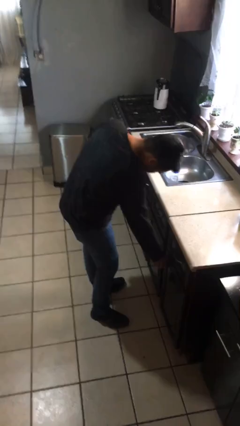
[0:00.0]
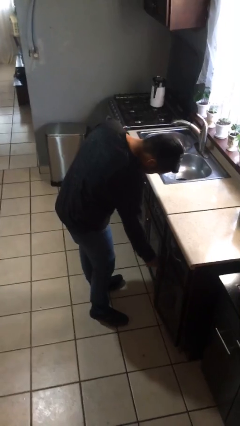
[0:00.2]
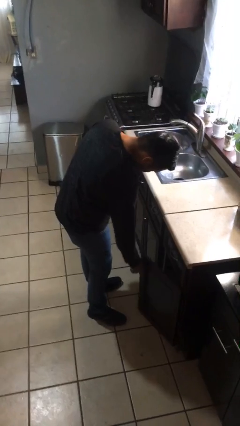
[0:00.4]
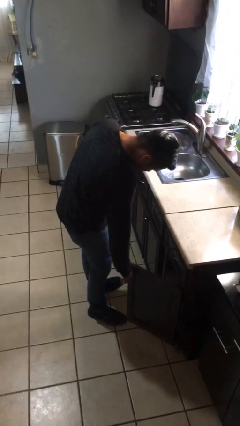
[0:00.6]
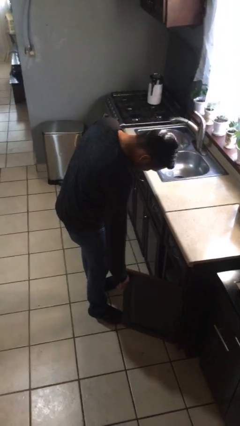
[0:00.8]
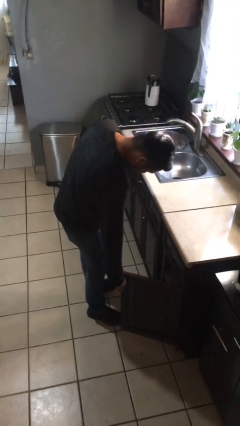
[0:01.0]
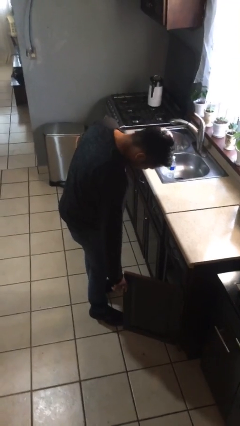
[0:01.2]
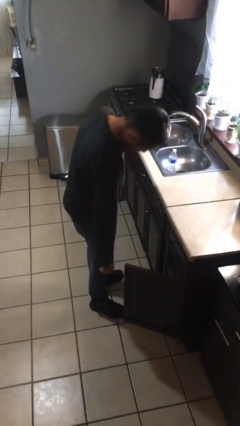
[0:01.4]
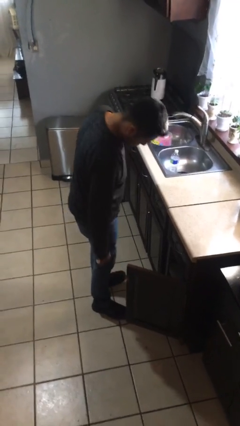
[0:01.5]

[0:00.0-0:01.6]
person opens cabinet

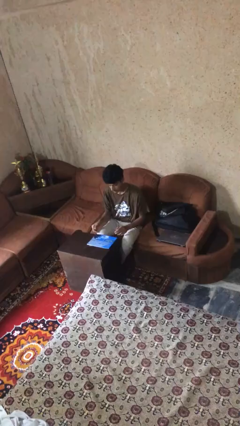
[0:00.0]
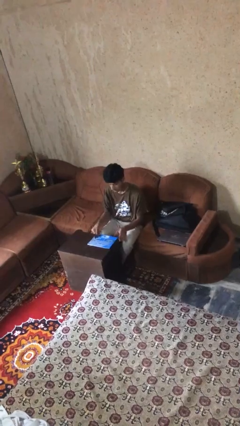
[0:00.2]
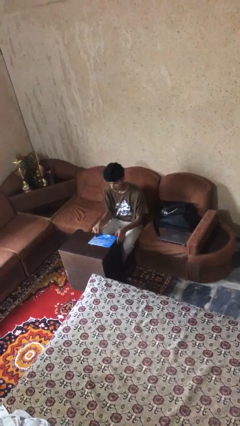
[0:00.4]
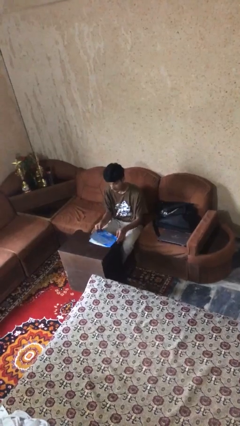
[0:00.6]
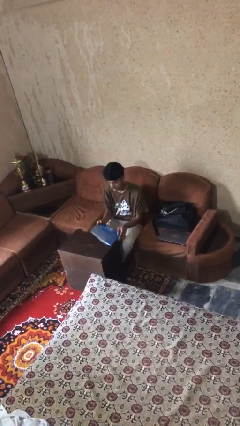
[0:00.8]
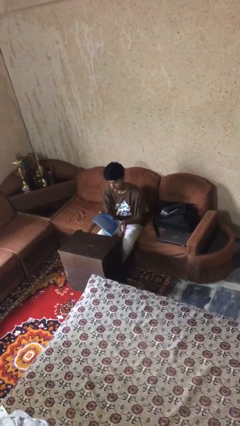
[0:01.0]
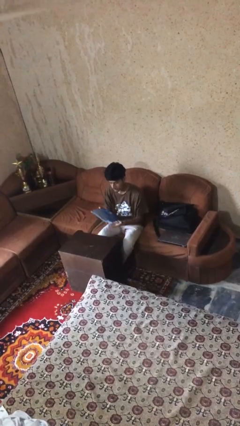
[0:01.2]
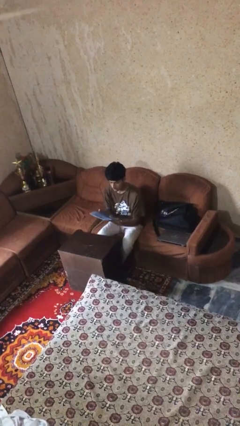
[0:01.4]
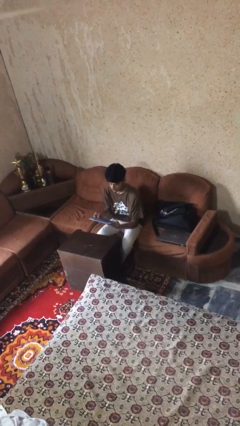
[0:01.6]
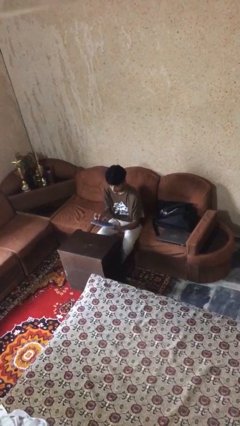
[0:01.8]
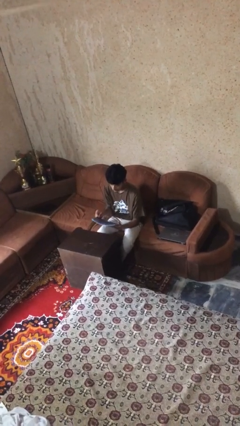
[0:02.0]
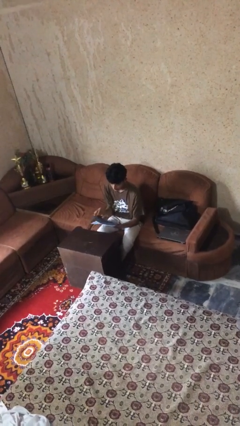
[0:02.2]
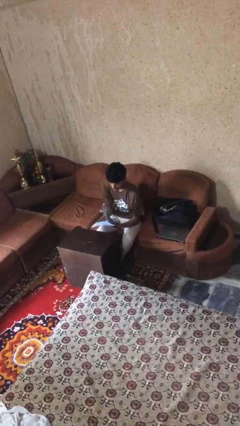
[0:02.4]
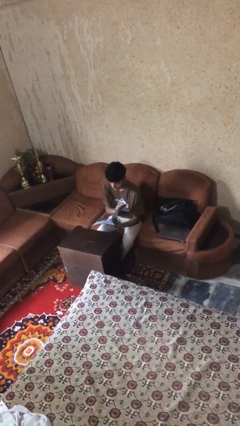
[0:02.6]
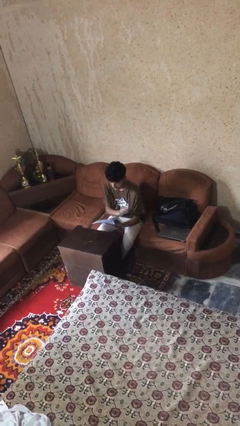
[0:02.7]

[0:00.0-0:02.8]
person picks up object from table

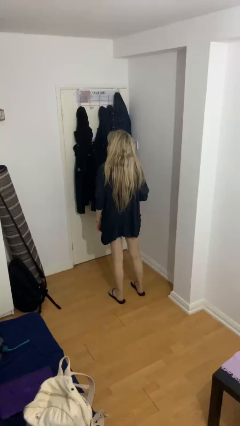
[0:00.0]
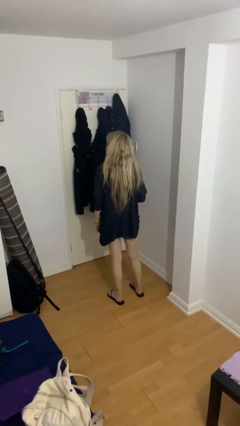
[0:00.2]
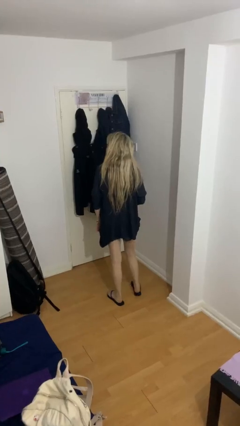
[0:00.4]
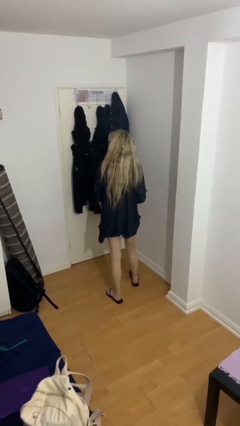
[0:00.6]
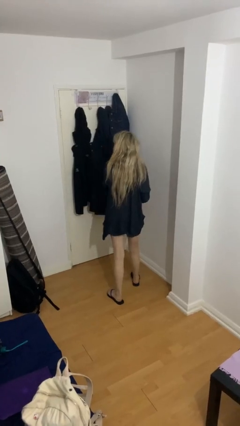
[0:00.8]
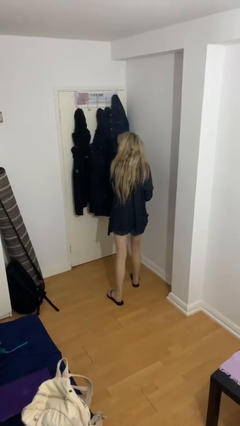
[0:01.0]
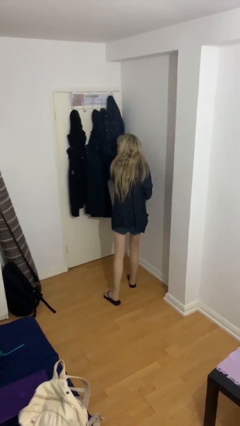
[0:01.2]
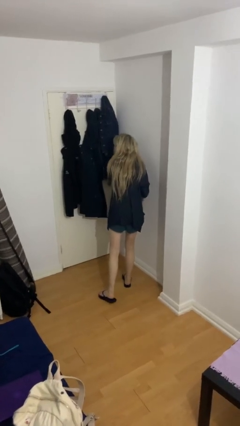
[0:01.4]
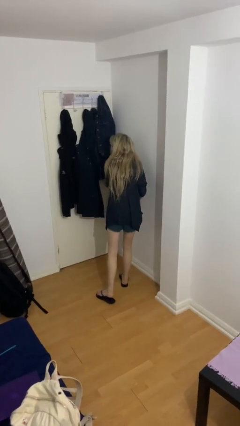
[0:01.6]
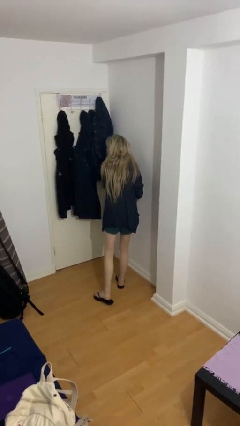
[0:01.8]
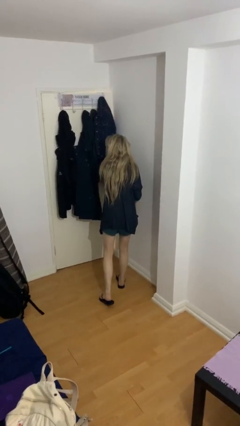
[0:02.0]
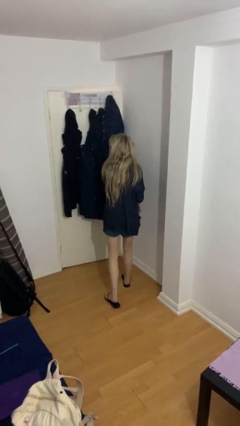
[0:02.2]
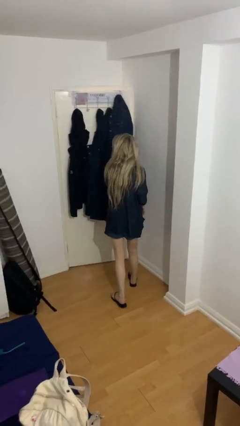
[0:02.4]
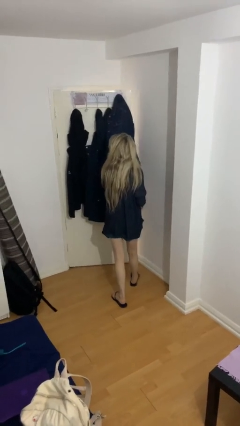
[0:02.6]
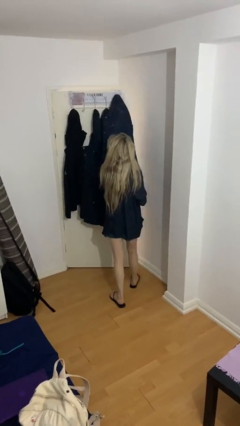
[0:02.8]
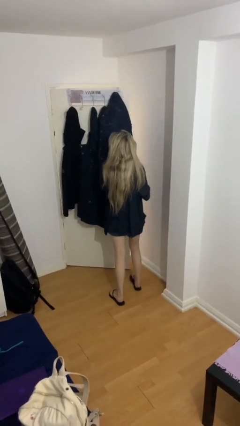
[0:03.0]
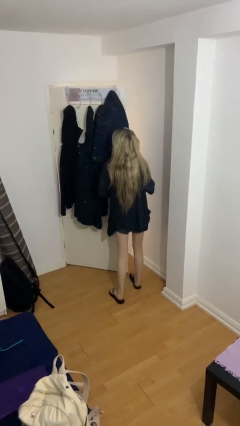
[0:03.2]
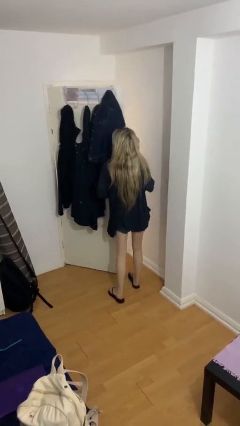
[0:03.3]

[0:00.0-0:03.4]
person opens facility door

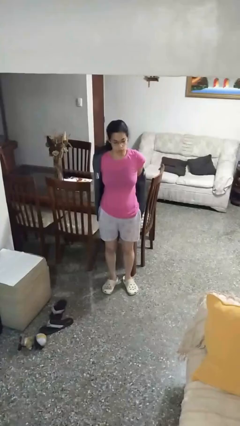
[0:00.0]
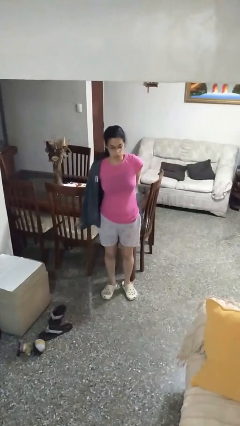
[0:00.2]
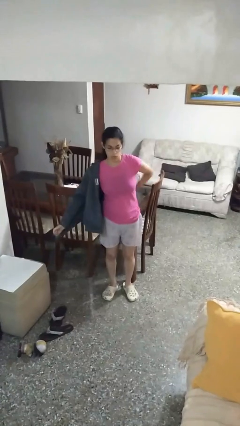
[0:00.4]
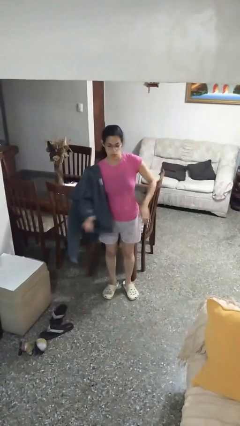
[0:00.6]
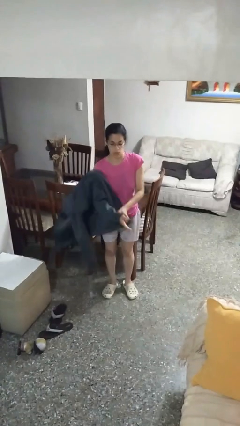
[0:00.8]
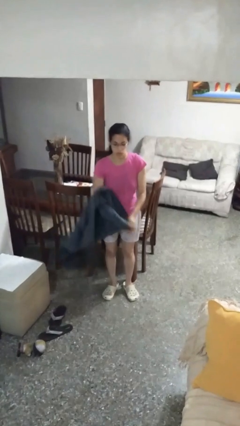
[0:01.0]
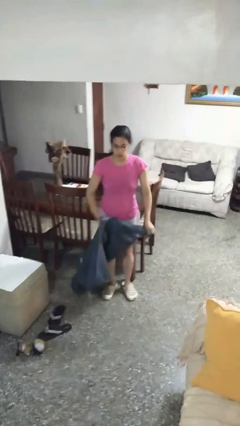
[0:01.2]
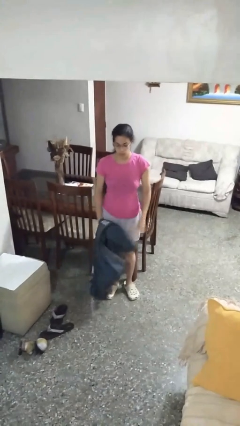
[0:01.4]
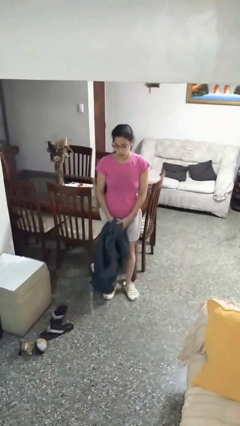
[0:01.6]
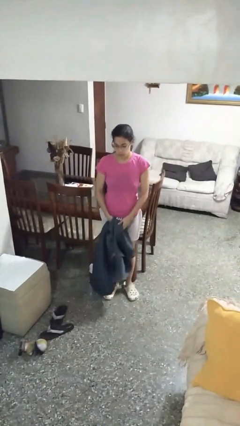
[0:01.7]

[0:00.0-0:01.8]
person takes off jacket

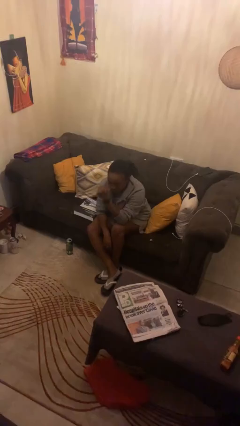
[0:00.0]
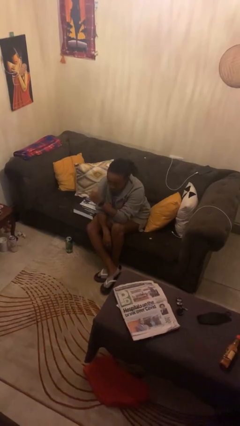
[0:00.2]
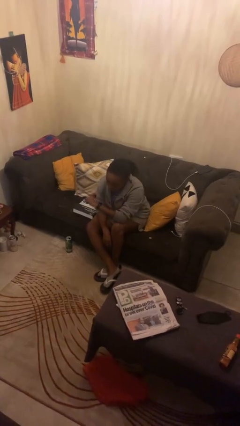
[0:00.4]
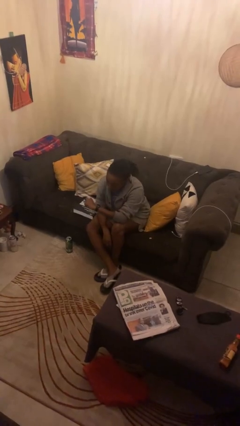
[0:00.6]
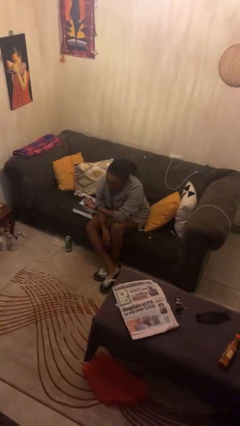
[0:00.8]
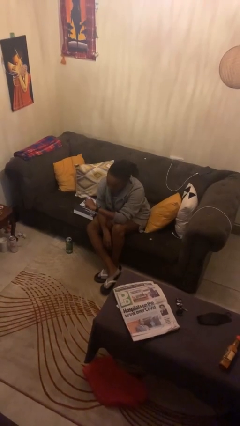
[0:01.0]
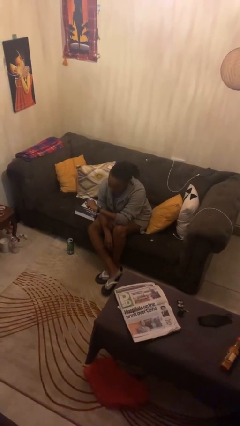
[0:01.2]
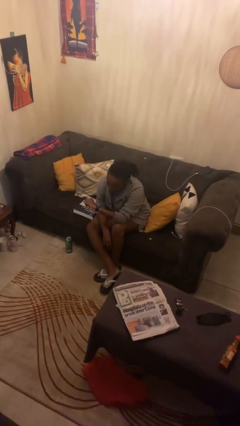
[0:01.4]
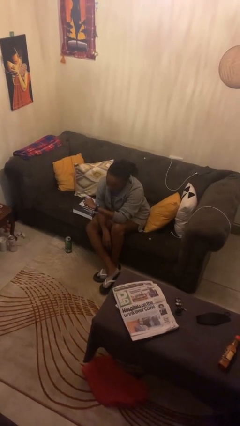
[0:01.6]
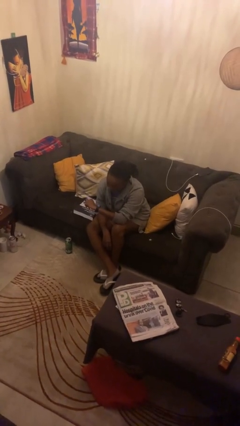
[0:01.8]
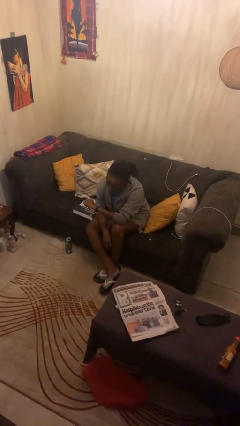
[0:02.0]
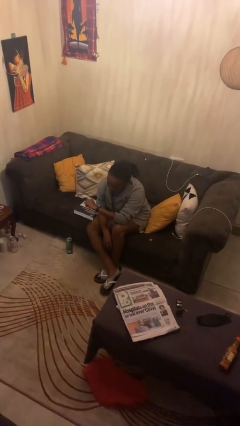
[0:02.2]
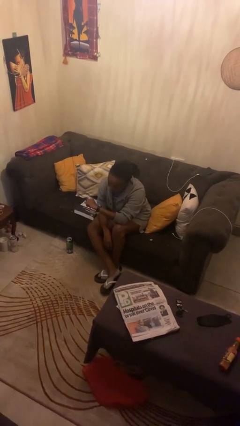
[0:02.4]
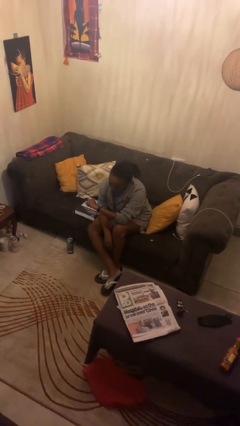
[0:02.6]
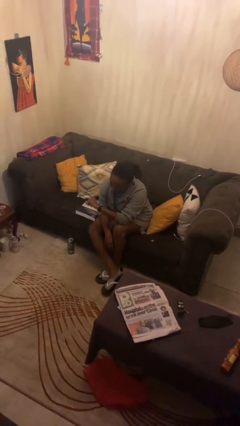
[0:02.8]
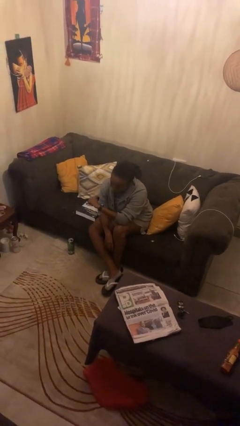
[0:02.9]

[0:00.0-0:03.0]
person looks at wristwatch

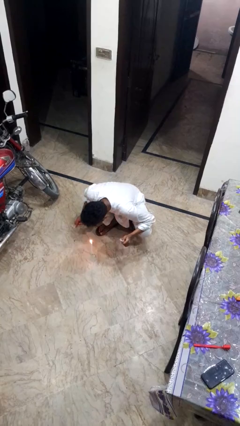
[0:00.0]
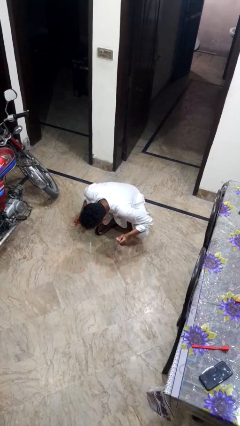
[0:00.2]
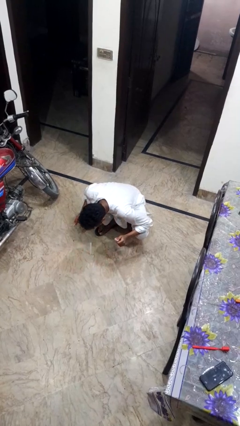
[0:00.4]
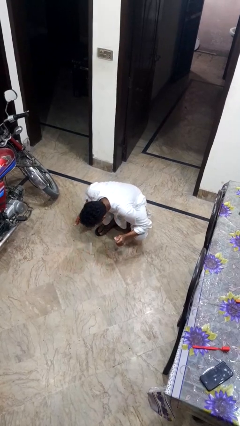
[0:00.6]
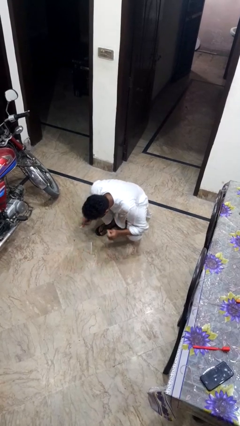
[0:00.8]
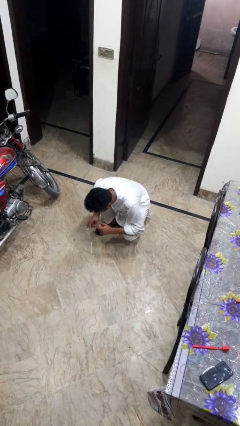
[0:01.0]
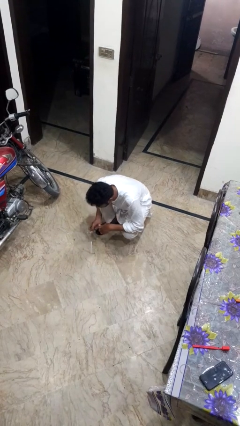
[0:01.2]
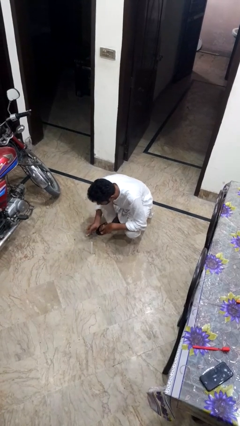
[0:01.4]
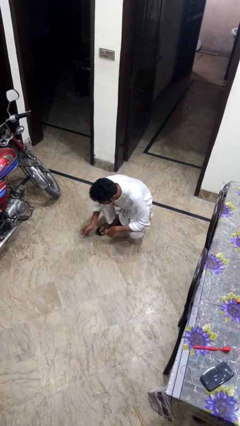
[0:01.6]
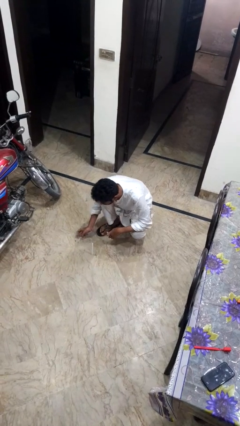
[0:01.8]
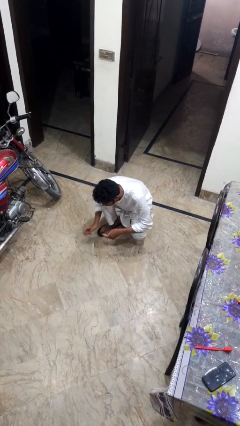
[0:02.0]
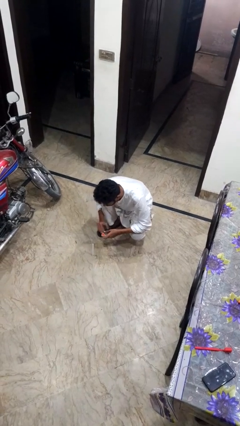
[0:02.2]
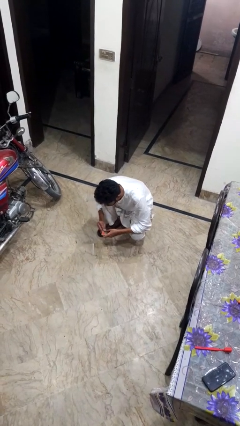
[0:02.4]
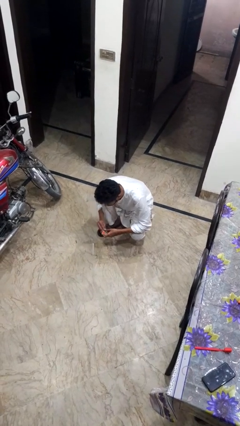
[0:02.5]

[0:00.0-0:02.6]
person extinguishes candle

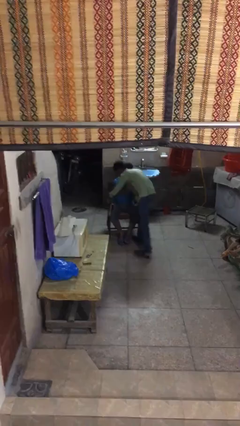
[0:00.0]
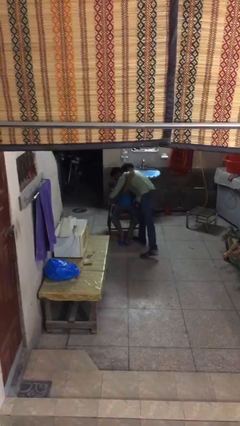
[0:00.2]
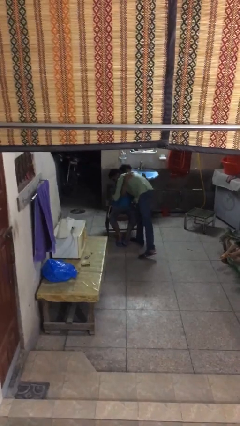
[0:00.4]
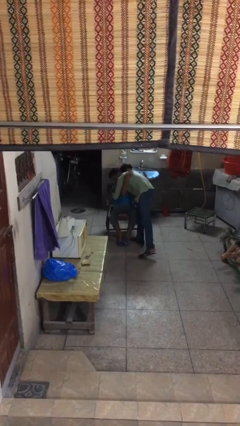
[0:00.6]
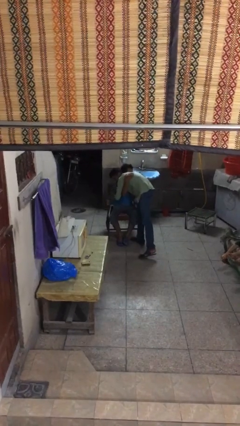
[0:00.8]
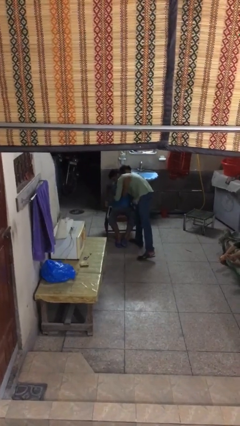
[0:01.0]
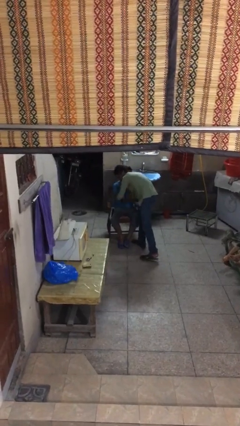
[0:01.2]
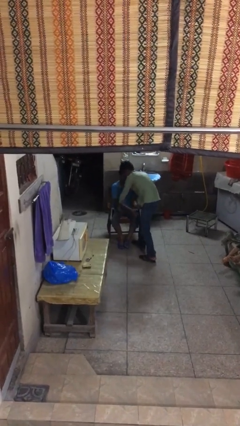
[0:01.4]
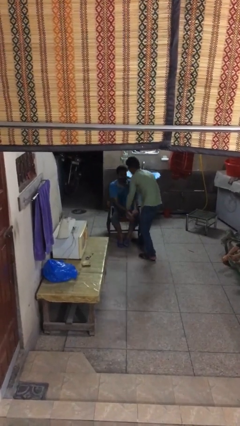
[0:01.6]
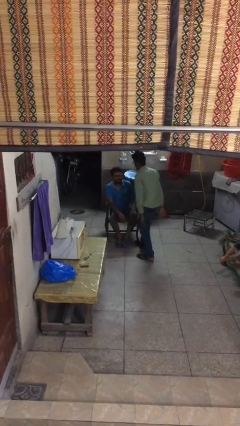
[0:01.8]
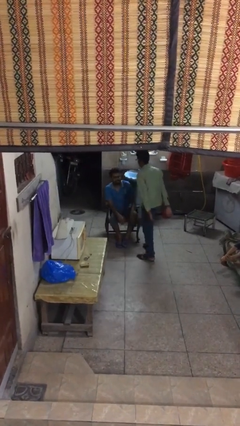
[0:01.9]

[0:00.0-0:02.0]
person embraces person
